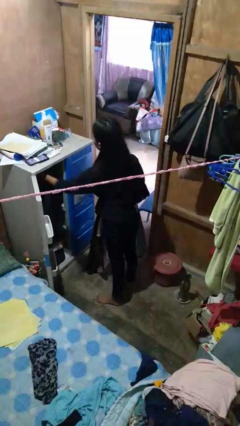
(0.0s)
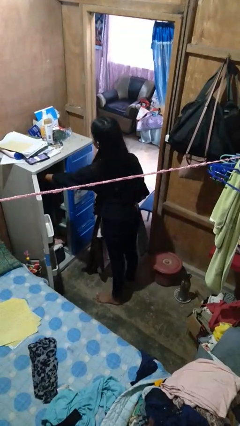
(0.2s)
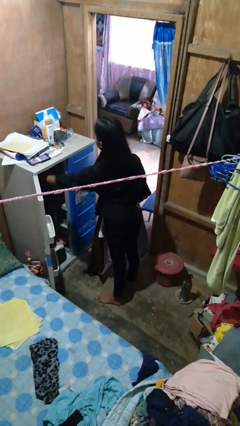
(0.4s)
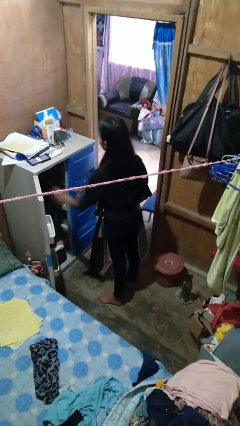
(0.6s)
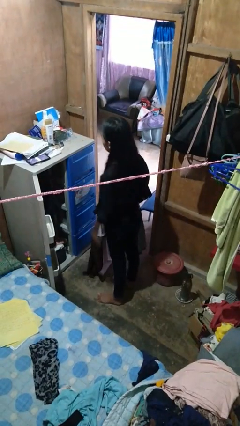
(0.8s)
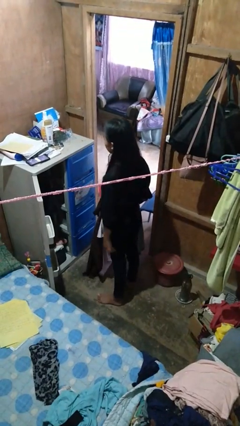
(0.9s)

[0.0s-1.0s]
person puts clothes into closet

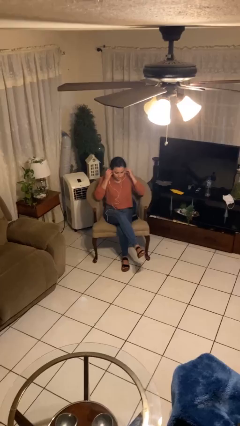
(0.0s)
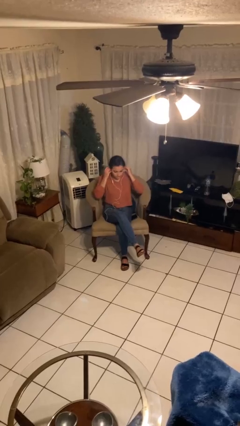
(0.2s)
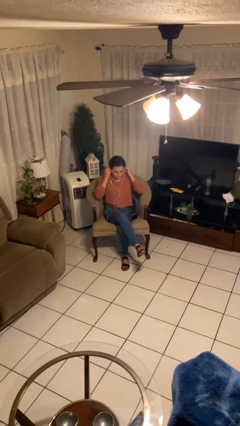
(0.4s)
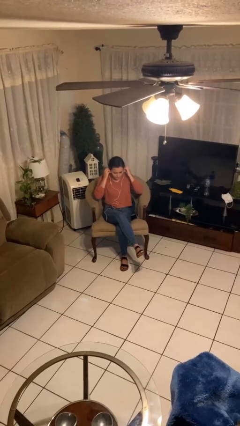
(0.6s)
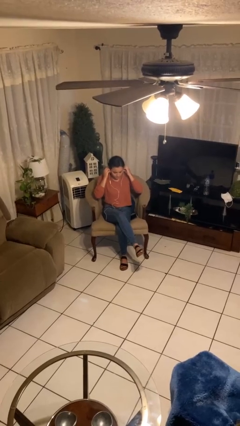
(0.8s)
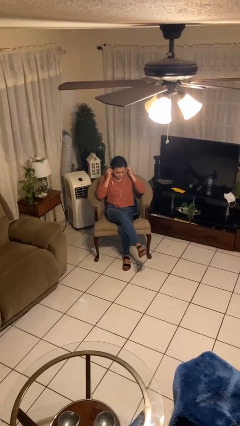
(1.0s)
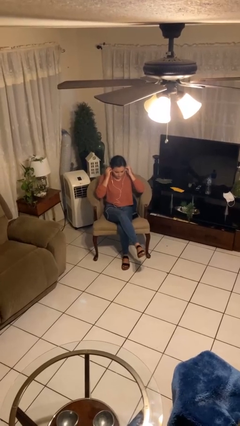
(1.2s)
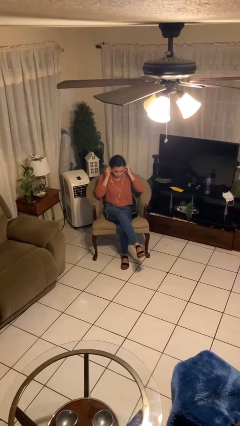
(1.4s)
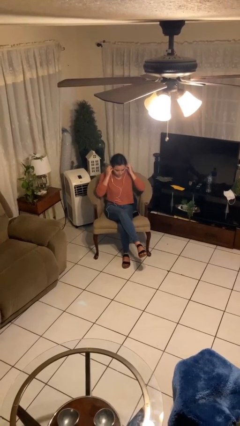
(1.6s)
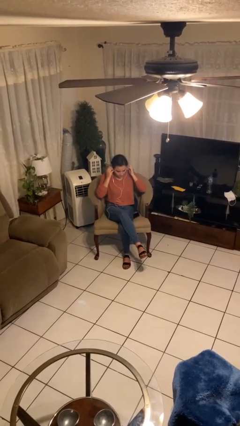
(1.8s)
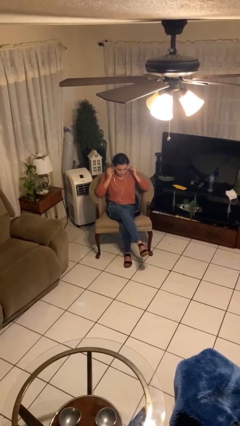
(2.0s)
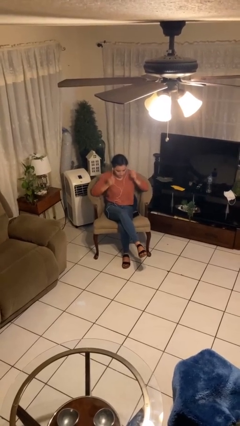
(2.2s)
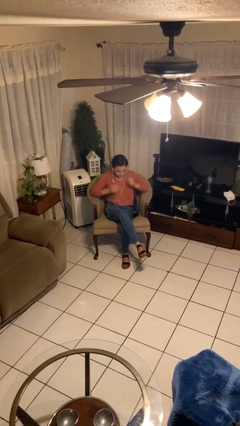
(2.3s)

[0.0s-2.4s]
person puts on headphones

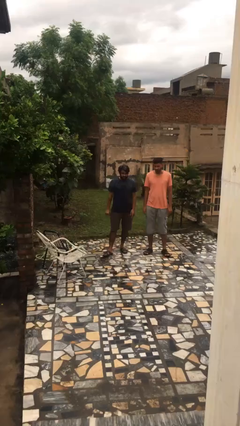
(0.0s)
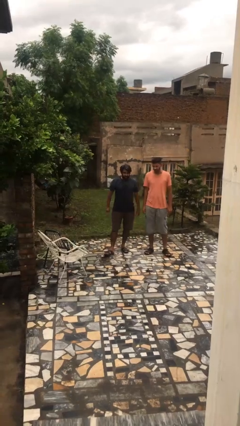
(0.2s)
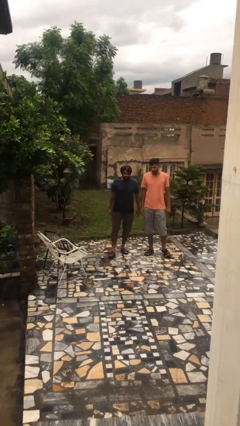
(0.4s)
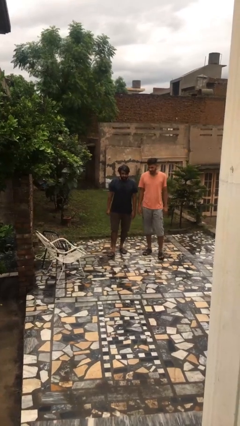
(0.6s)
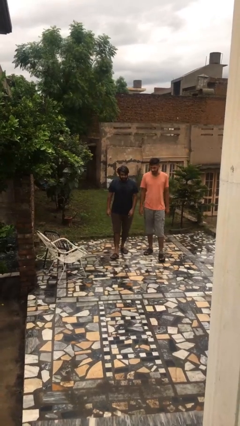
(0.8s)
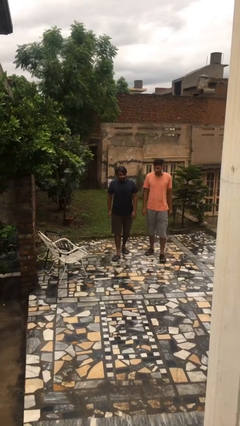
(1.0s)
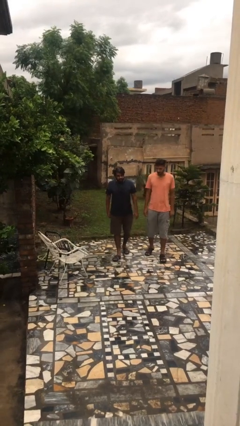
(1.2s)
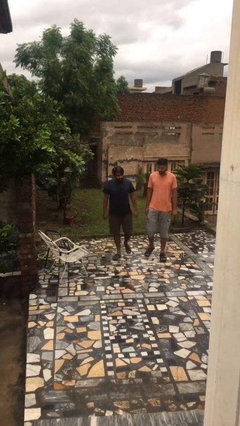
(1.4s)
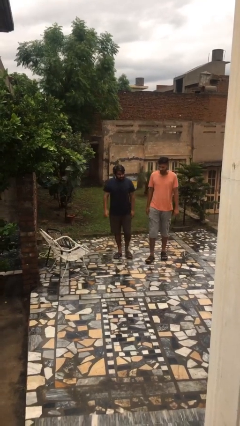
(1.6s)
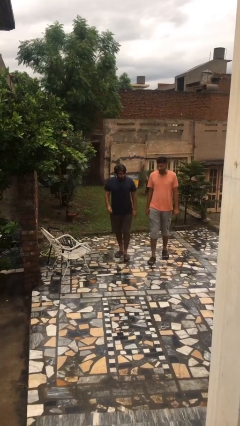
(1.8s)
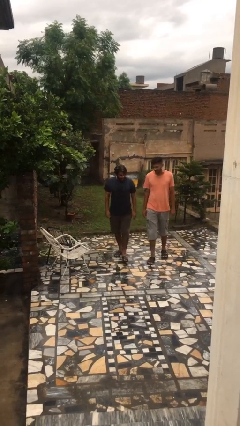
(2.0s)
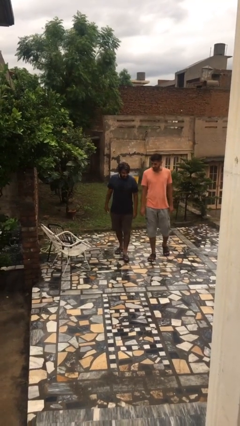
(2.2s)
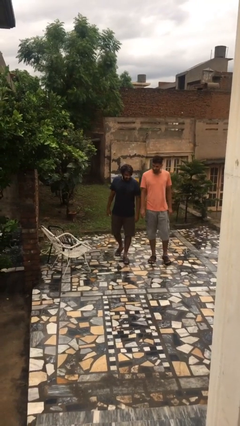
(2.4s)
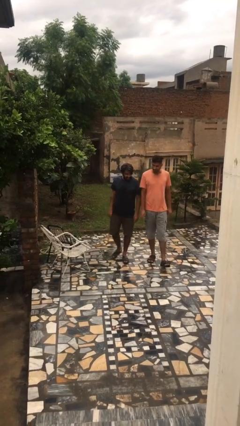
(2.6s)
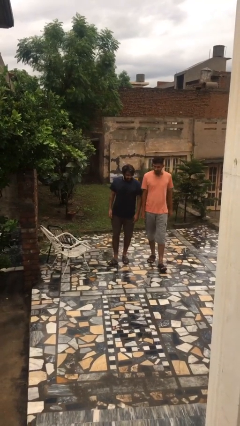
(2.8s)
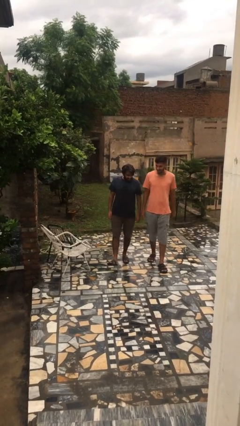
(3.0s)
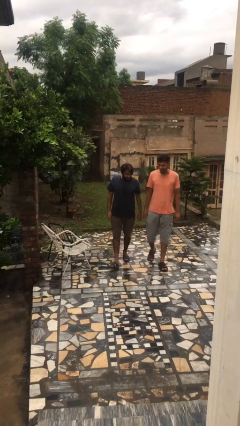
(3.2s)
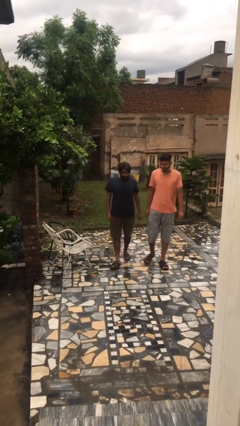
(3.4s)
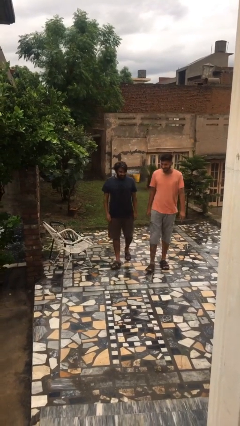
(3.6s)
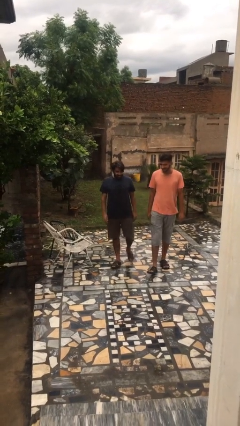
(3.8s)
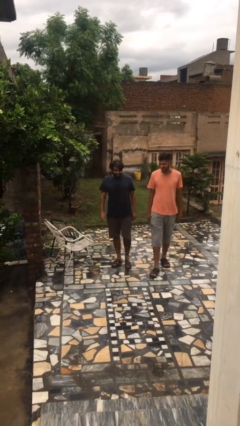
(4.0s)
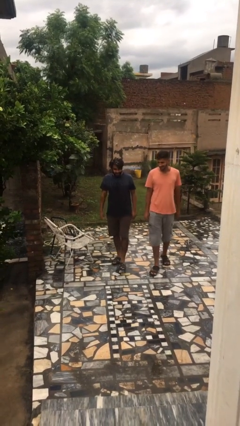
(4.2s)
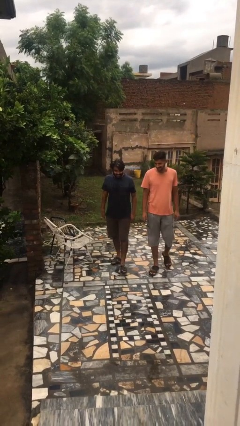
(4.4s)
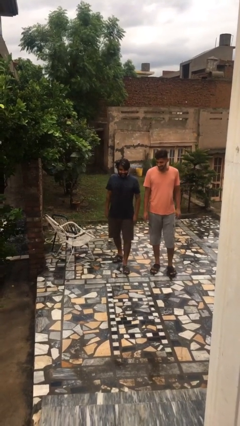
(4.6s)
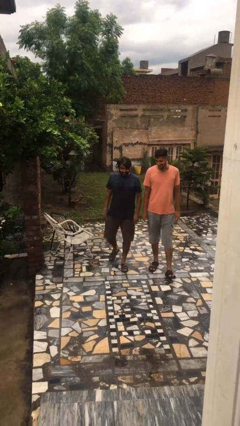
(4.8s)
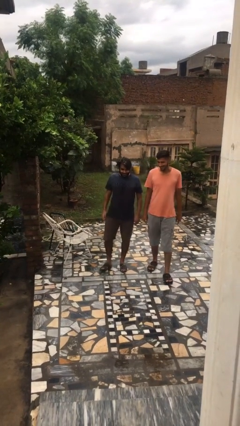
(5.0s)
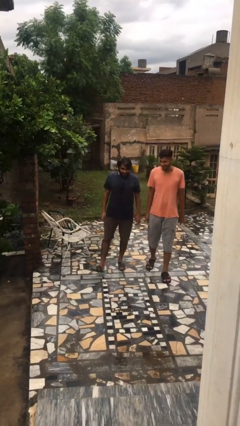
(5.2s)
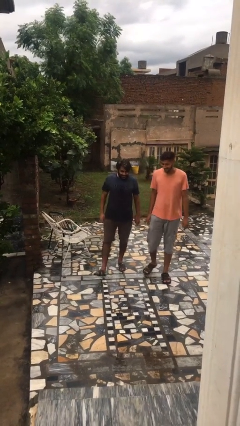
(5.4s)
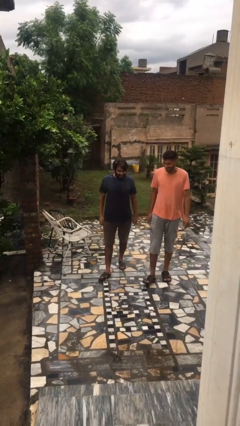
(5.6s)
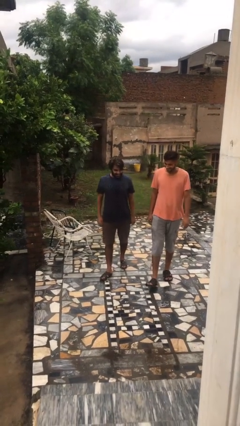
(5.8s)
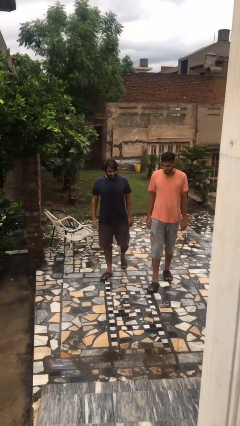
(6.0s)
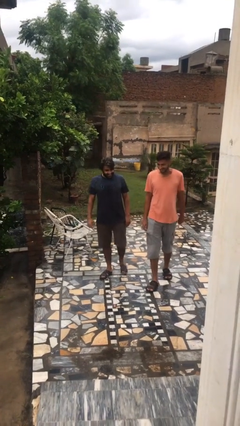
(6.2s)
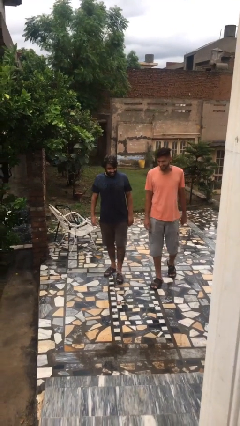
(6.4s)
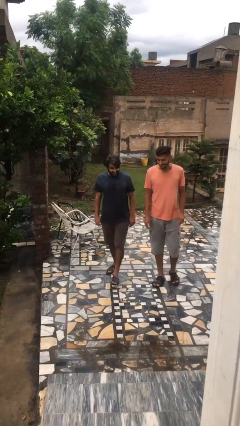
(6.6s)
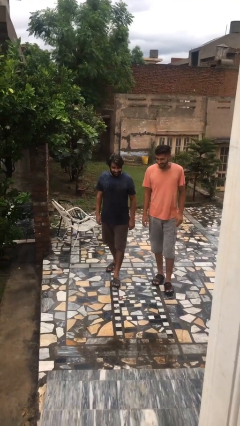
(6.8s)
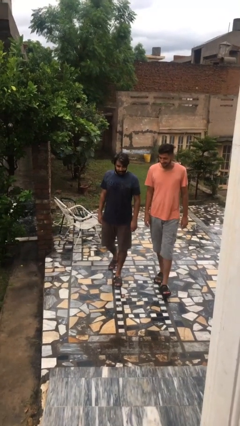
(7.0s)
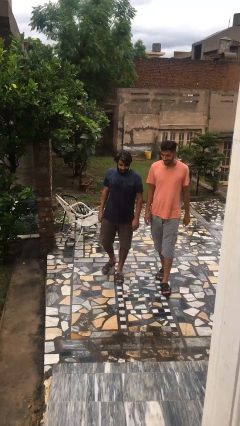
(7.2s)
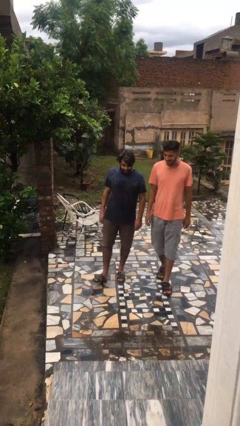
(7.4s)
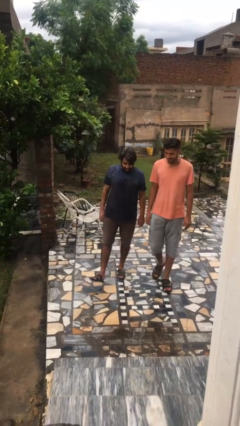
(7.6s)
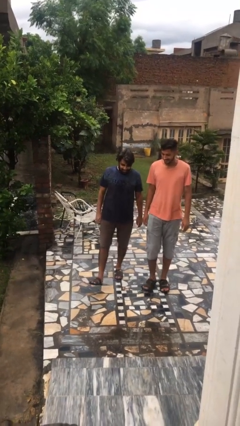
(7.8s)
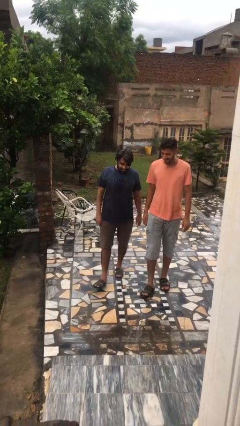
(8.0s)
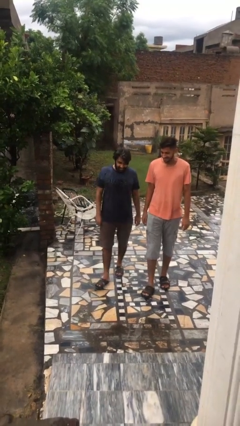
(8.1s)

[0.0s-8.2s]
person talks to person

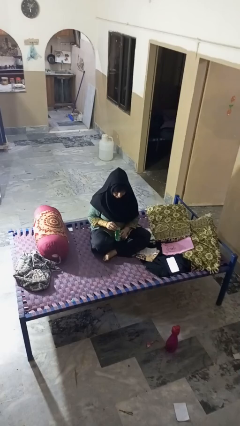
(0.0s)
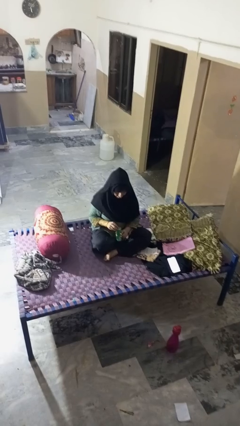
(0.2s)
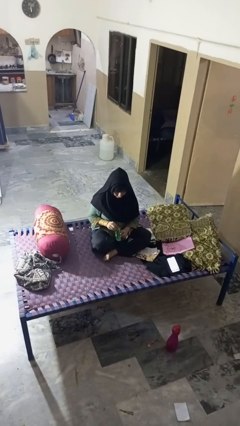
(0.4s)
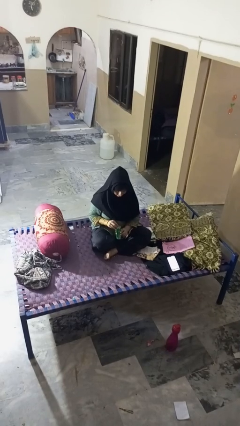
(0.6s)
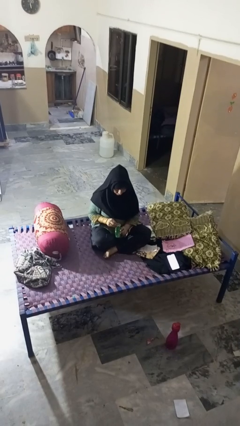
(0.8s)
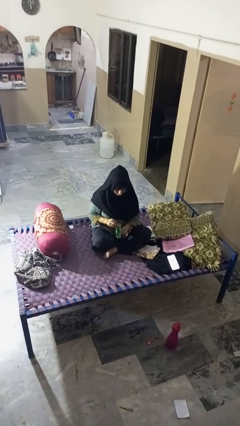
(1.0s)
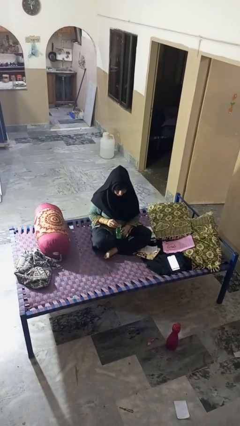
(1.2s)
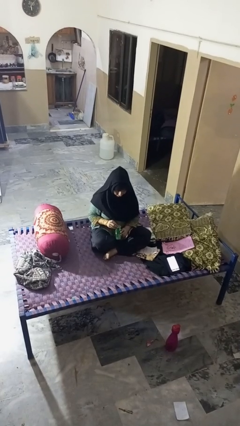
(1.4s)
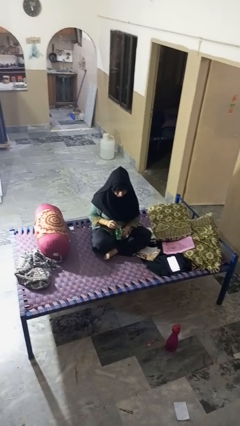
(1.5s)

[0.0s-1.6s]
person opens can with can opener

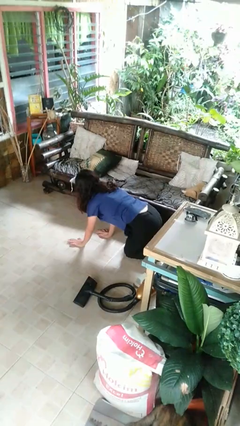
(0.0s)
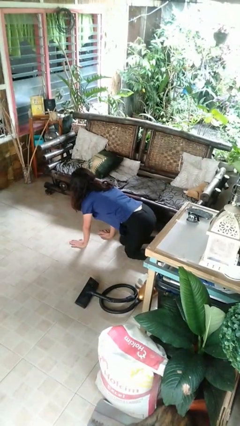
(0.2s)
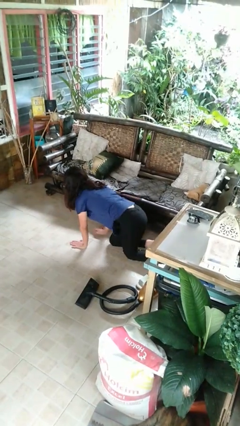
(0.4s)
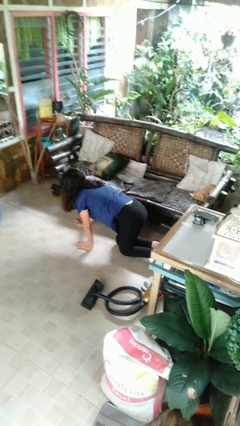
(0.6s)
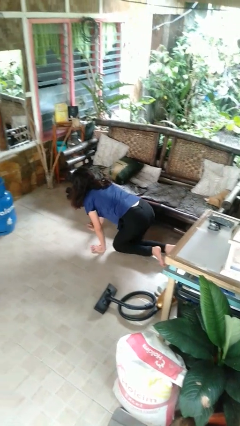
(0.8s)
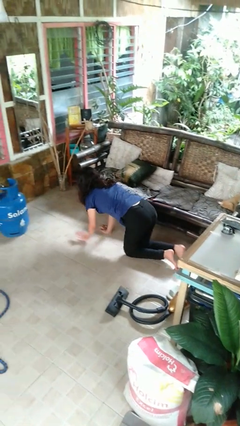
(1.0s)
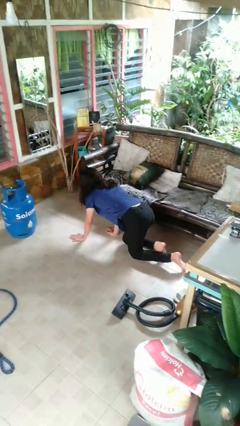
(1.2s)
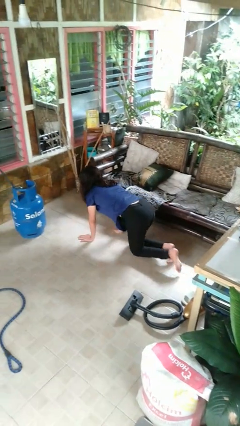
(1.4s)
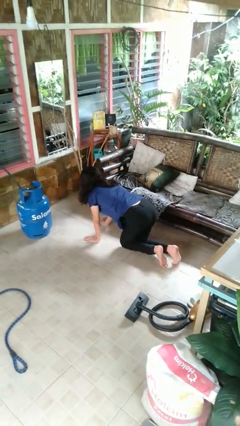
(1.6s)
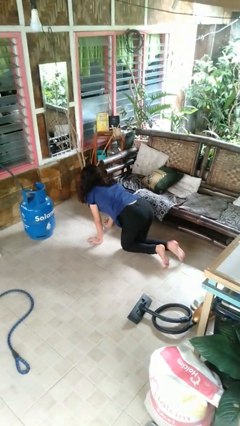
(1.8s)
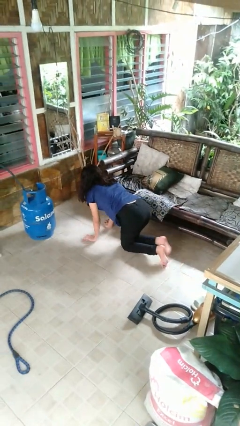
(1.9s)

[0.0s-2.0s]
person crawls

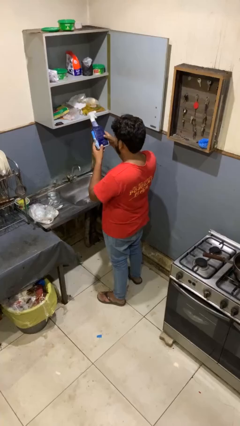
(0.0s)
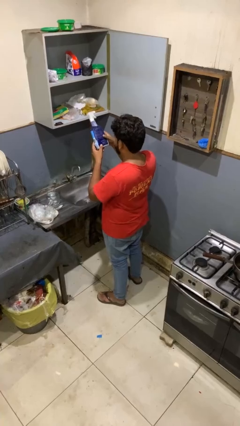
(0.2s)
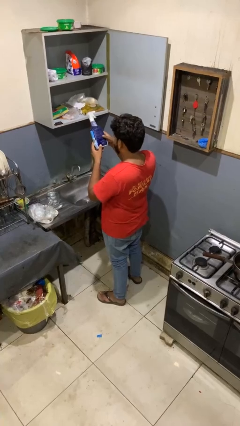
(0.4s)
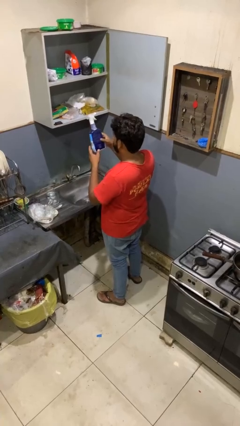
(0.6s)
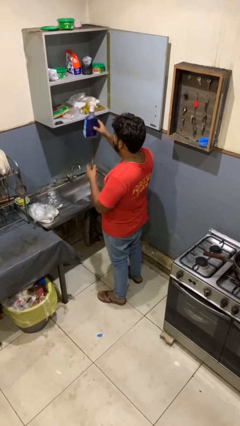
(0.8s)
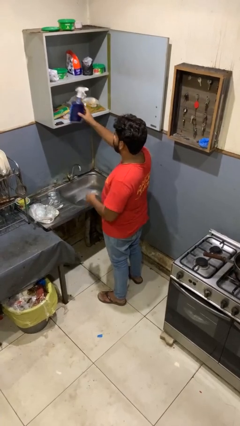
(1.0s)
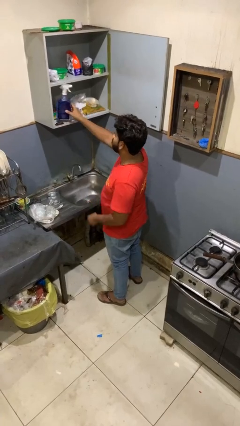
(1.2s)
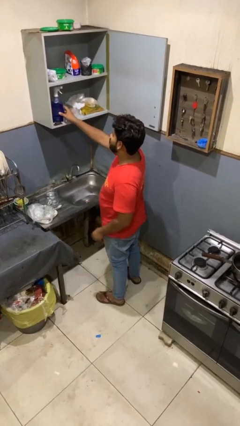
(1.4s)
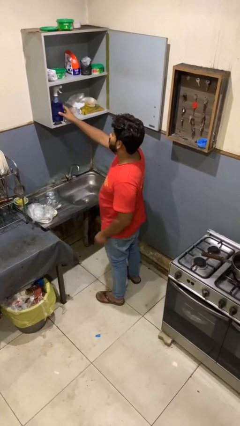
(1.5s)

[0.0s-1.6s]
person puts down object into cabinet

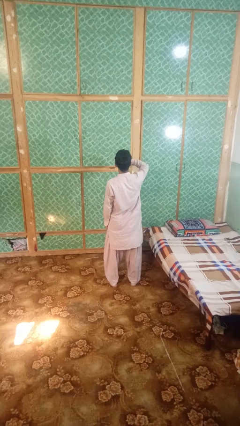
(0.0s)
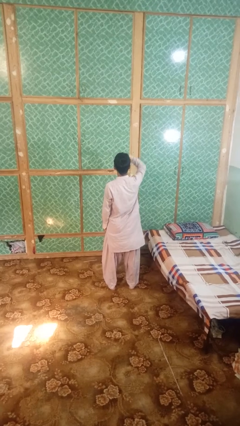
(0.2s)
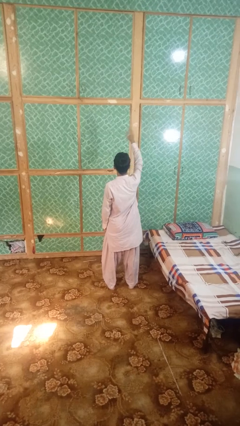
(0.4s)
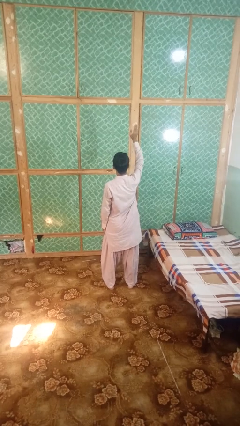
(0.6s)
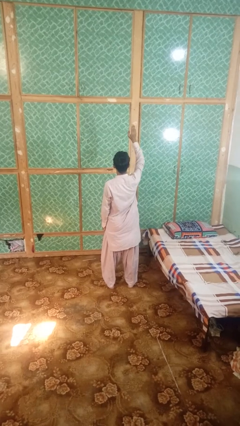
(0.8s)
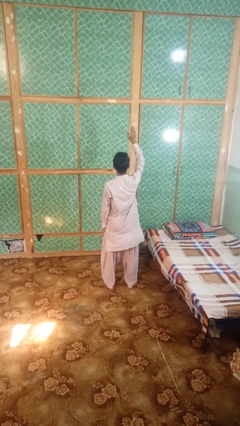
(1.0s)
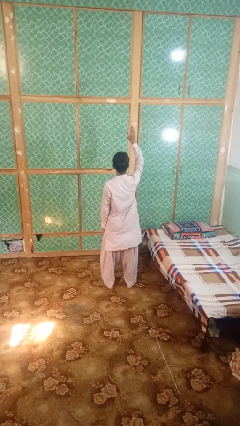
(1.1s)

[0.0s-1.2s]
person gestures swipe up
